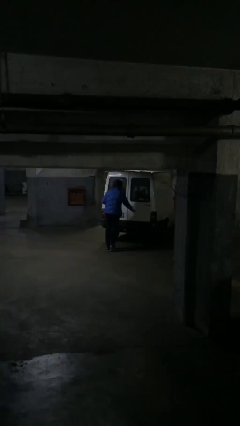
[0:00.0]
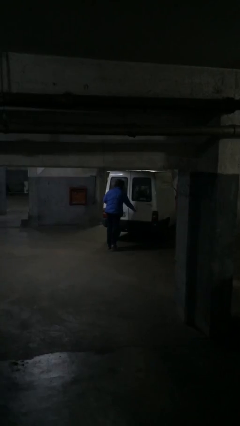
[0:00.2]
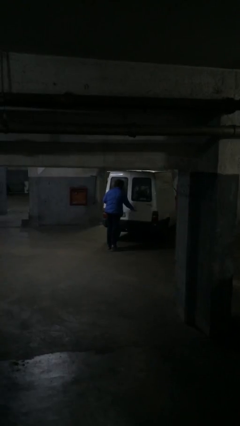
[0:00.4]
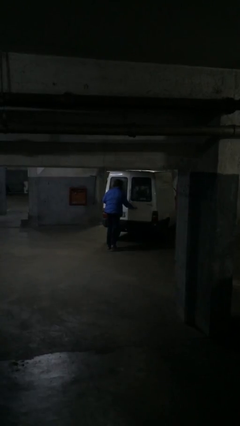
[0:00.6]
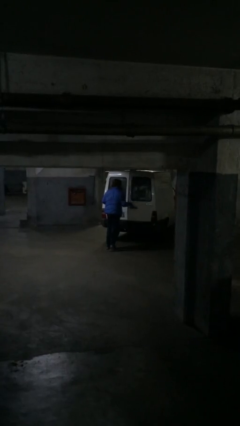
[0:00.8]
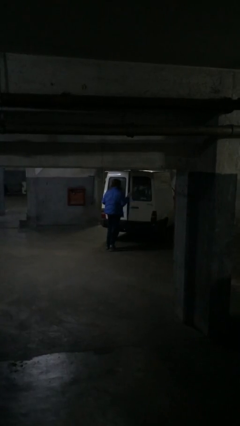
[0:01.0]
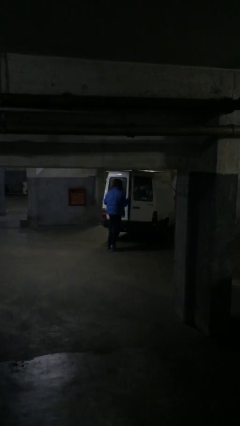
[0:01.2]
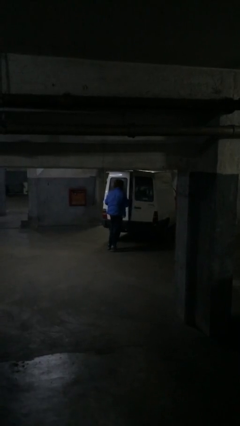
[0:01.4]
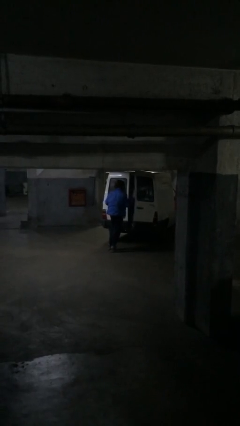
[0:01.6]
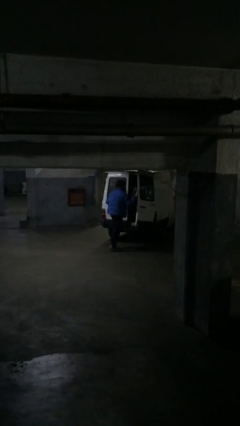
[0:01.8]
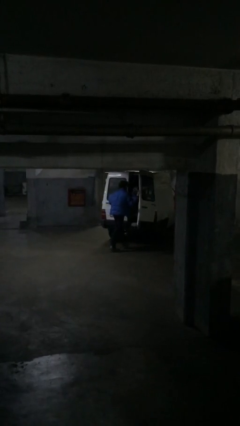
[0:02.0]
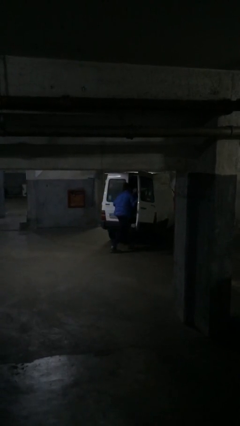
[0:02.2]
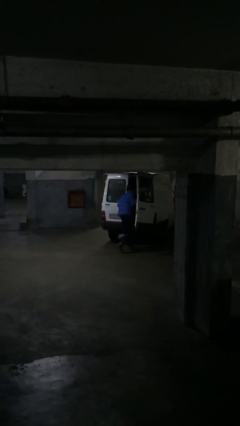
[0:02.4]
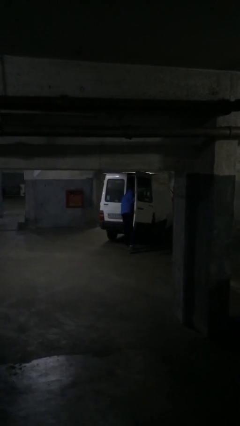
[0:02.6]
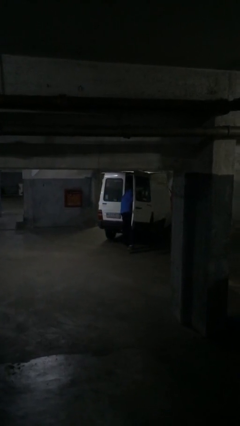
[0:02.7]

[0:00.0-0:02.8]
person opens car door

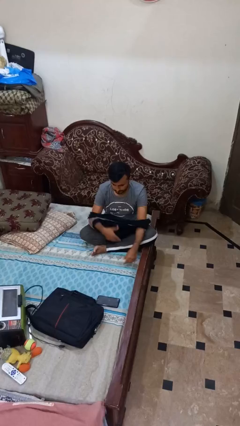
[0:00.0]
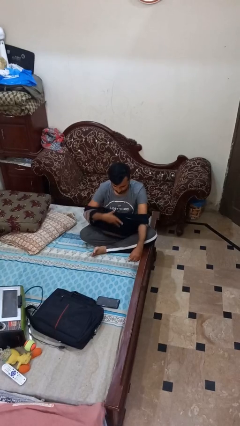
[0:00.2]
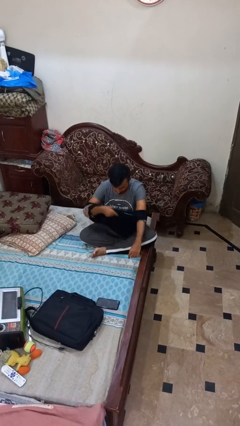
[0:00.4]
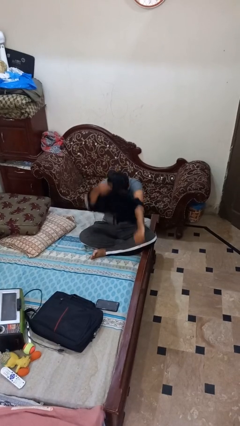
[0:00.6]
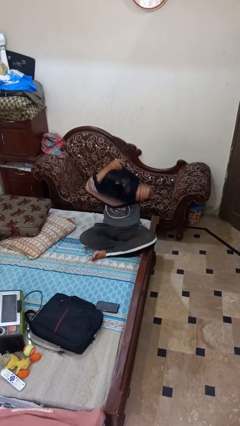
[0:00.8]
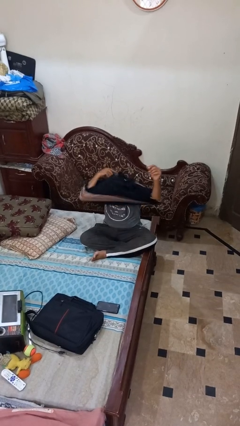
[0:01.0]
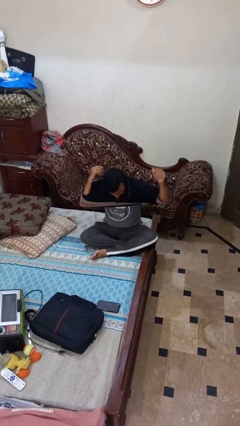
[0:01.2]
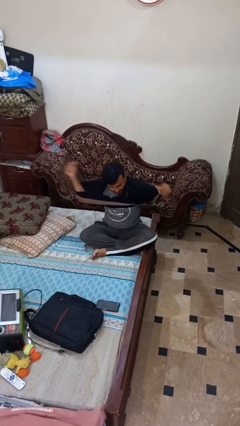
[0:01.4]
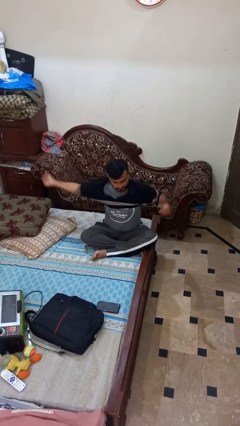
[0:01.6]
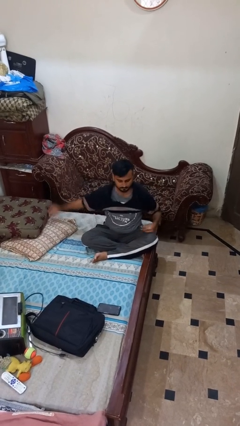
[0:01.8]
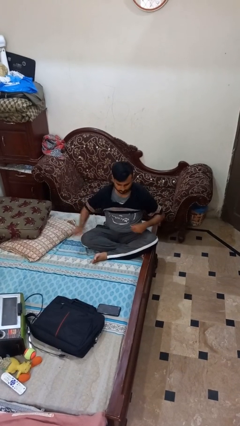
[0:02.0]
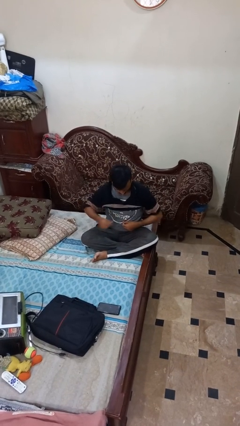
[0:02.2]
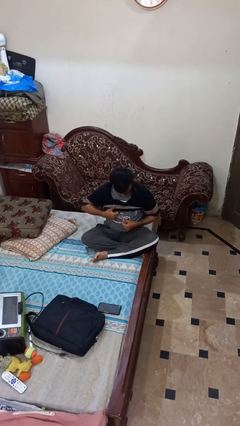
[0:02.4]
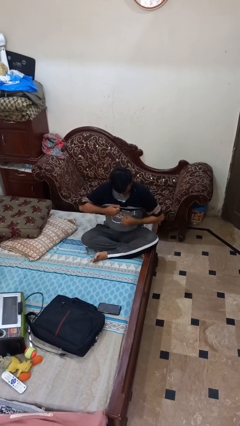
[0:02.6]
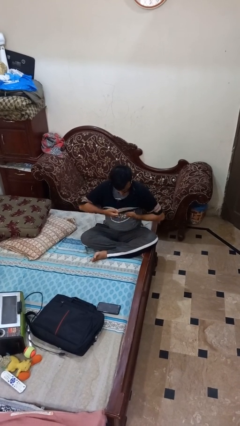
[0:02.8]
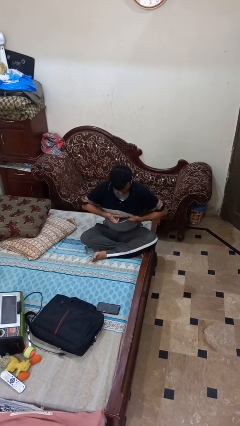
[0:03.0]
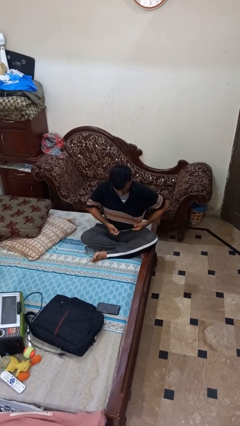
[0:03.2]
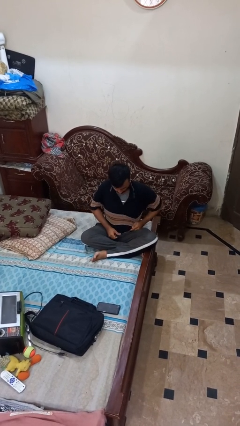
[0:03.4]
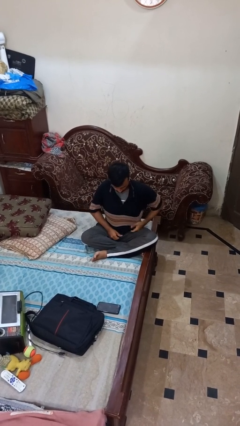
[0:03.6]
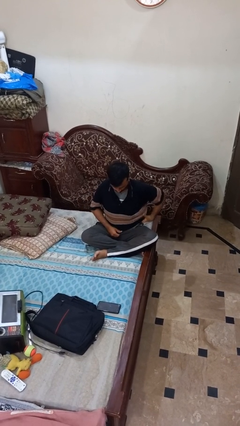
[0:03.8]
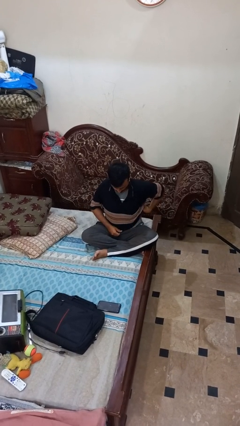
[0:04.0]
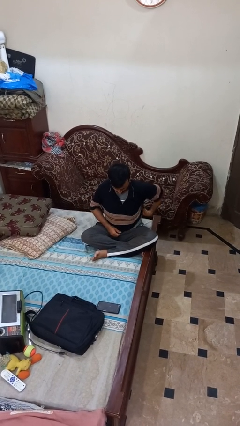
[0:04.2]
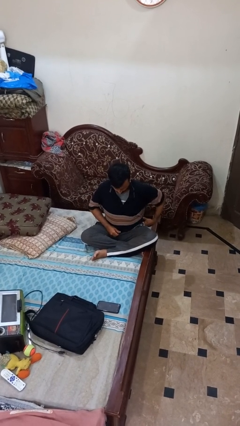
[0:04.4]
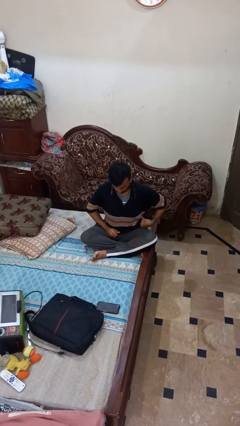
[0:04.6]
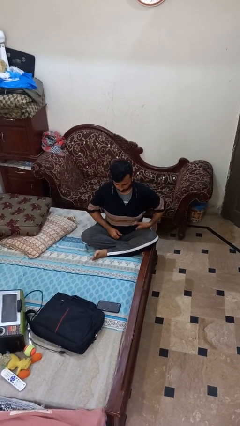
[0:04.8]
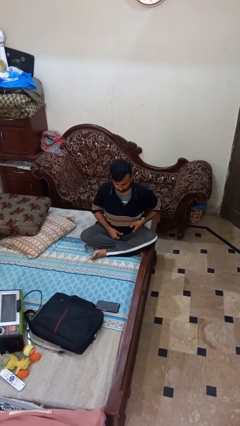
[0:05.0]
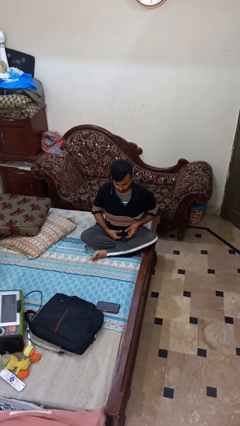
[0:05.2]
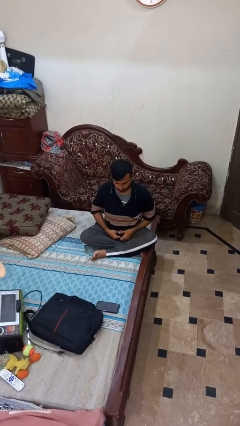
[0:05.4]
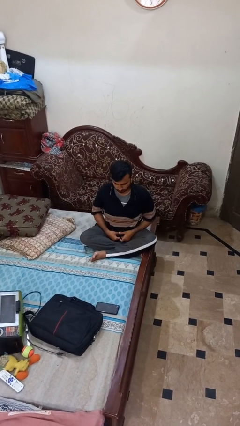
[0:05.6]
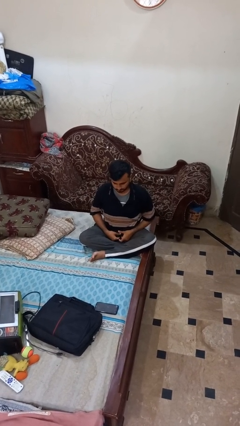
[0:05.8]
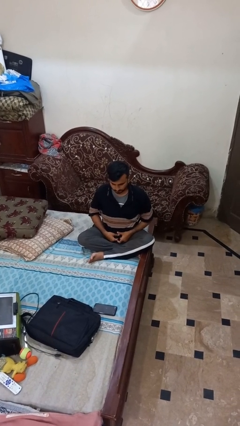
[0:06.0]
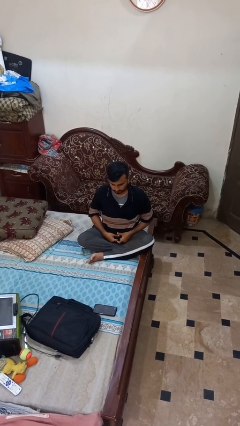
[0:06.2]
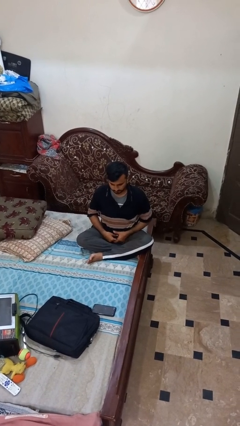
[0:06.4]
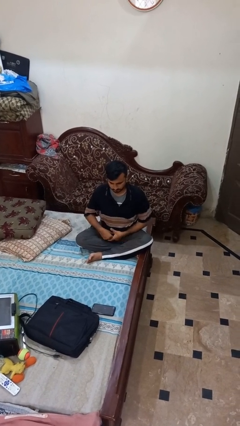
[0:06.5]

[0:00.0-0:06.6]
person puts on shirt

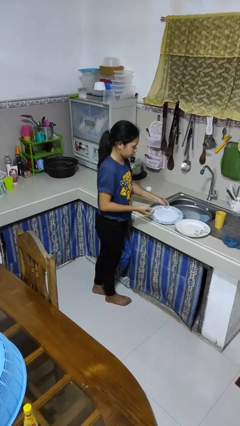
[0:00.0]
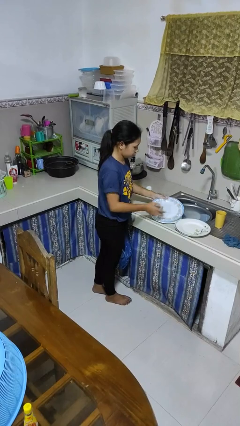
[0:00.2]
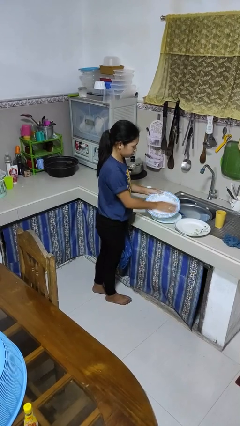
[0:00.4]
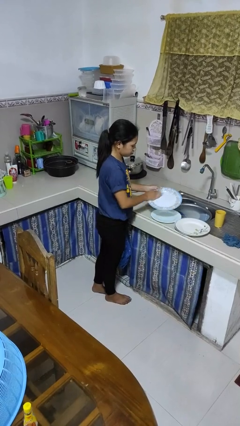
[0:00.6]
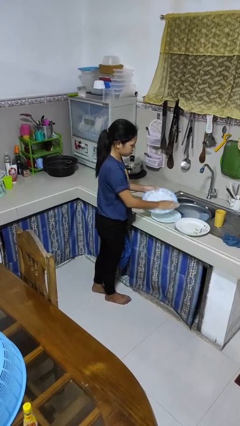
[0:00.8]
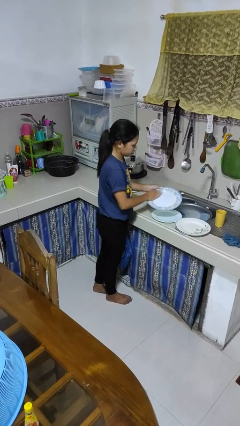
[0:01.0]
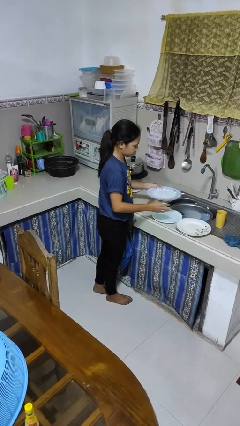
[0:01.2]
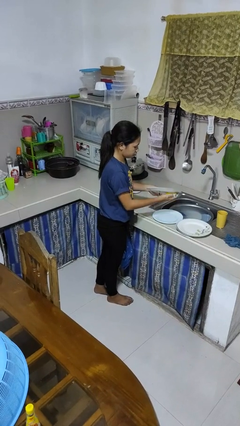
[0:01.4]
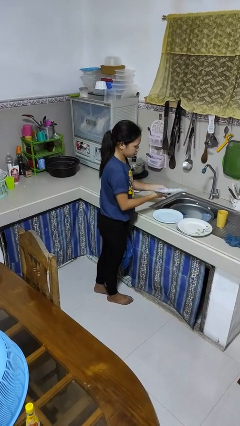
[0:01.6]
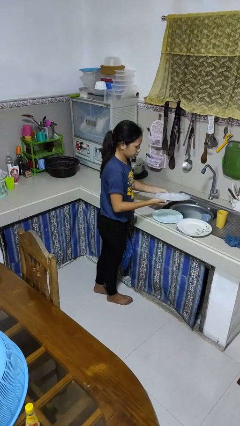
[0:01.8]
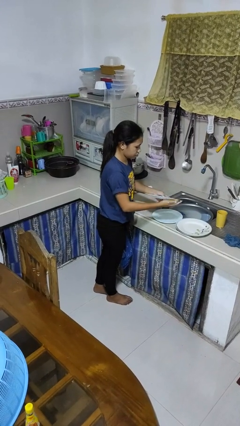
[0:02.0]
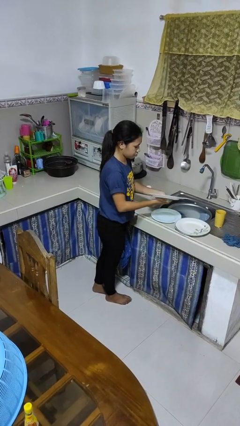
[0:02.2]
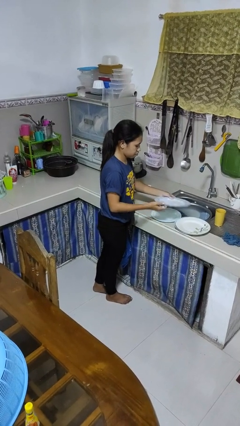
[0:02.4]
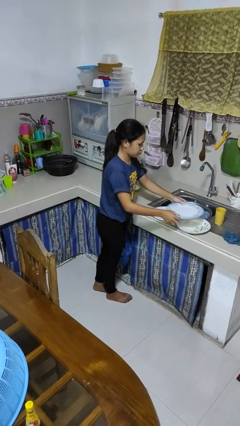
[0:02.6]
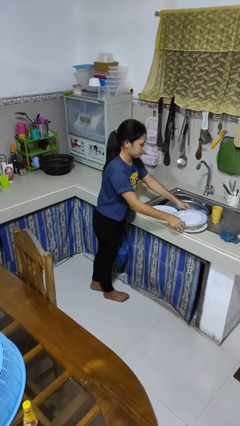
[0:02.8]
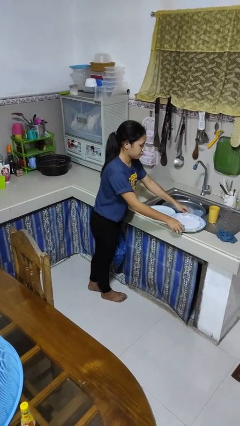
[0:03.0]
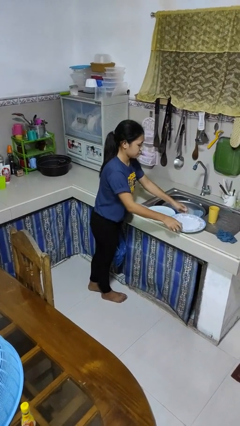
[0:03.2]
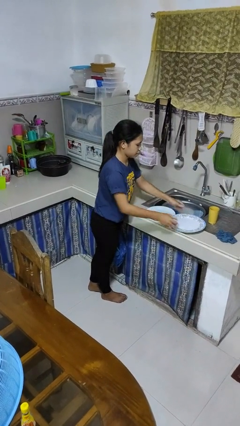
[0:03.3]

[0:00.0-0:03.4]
person washes dish

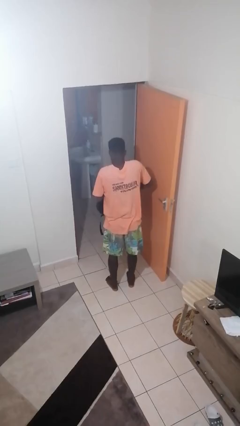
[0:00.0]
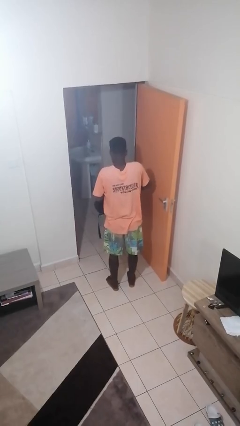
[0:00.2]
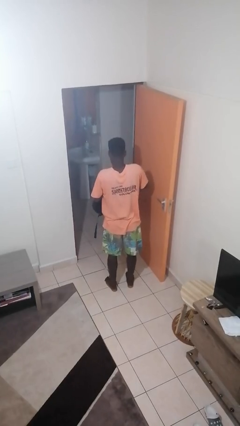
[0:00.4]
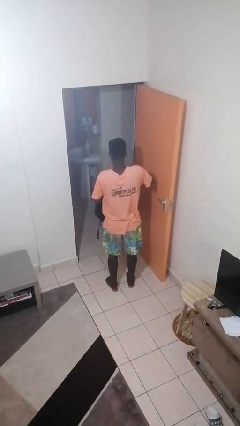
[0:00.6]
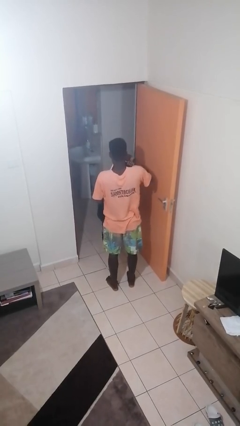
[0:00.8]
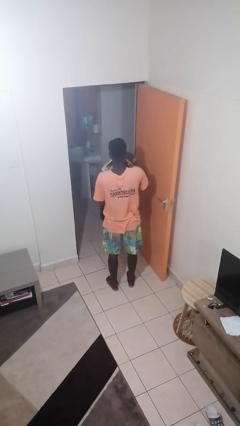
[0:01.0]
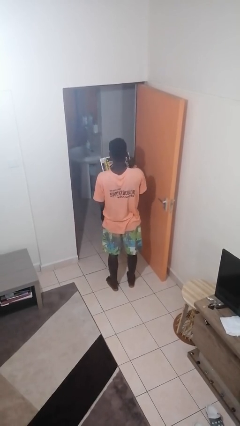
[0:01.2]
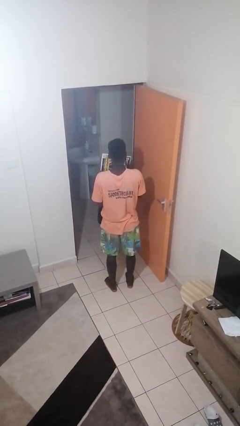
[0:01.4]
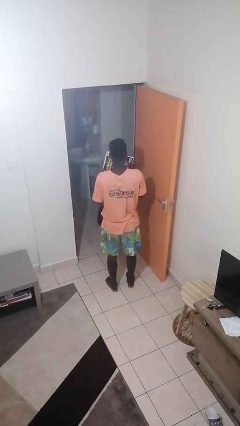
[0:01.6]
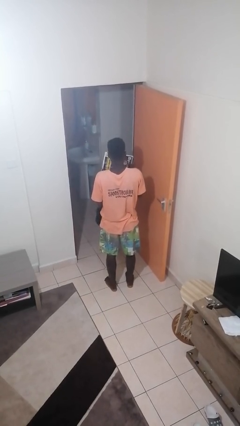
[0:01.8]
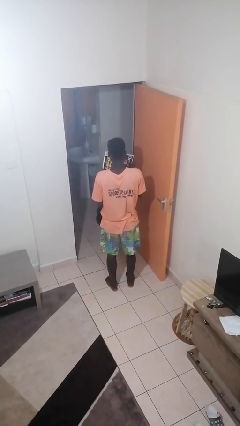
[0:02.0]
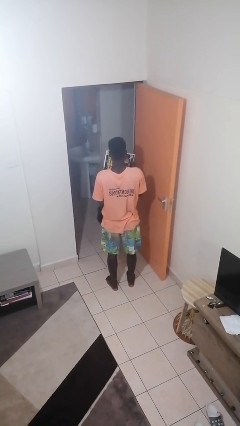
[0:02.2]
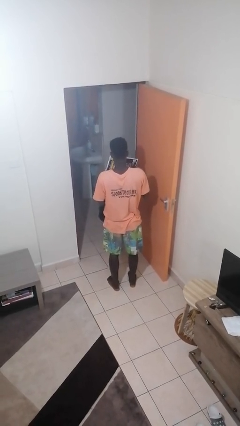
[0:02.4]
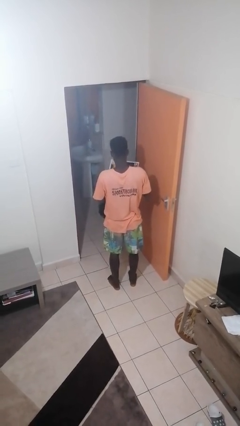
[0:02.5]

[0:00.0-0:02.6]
person takes object from backpack

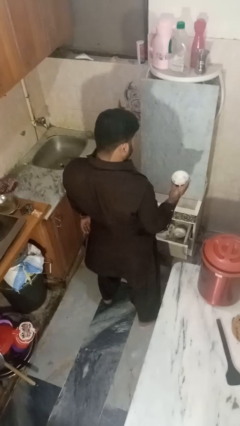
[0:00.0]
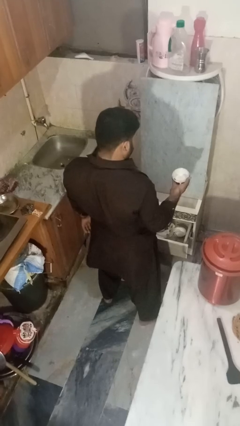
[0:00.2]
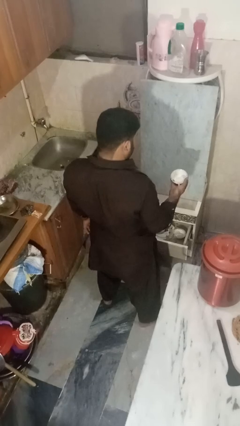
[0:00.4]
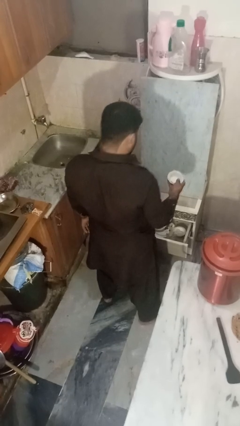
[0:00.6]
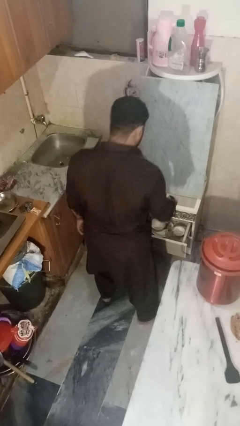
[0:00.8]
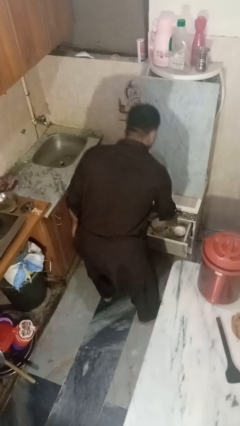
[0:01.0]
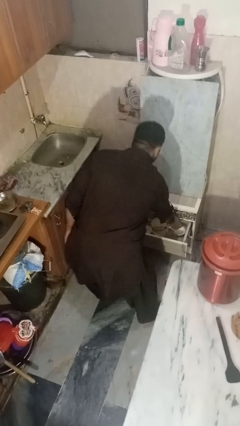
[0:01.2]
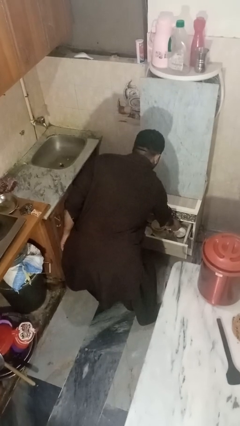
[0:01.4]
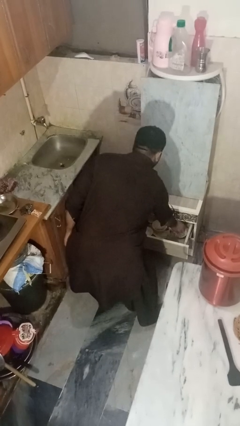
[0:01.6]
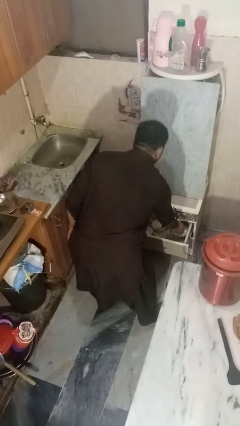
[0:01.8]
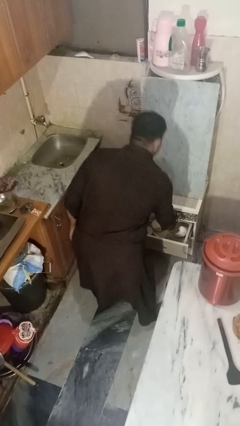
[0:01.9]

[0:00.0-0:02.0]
person puts object into kitchen drawer
